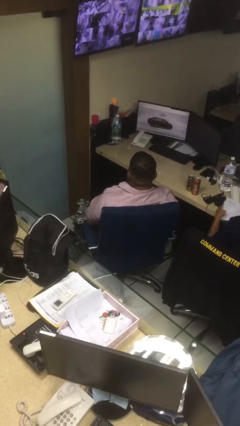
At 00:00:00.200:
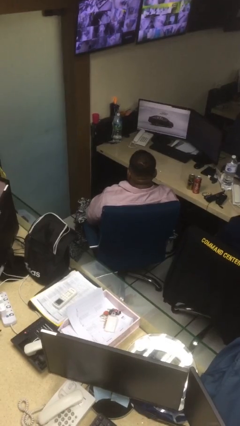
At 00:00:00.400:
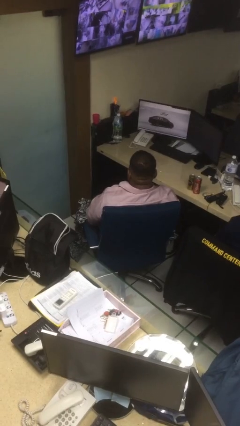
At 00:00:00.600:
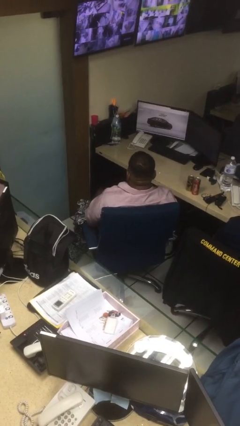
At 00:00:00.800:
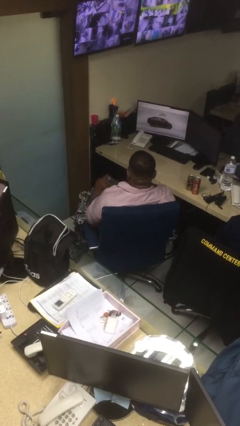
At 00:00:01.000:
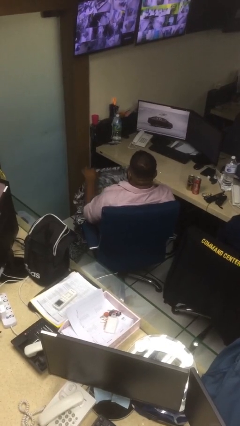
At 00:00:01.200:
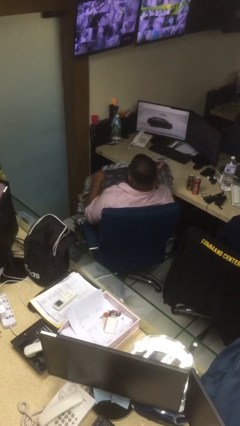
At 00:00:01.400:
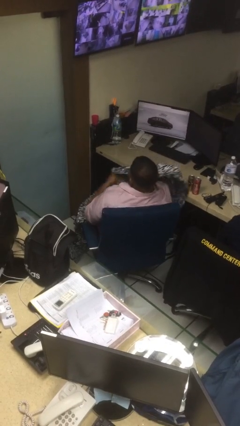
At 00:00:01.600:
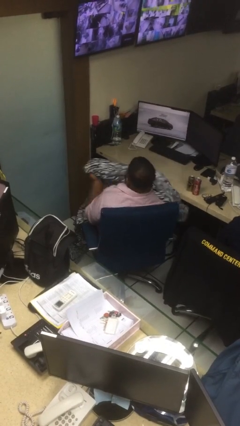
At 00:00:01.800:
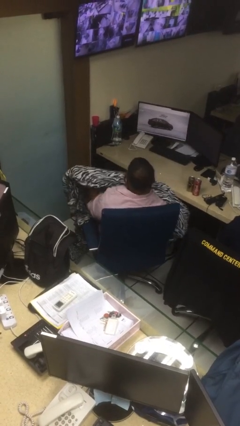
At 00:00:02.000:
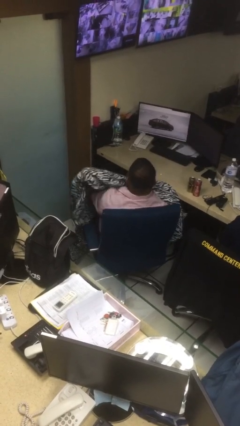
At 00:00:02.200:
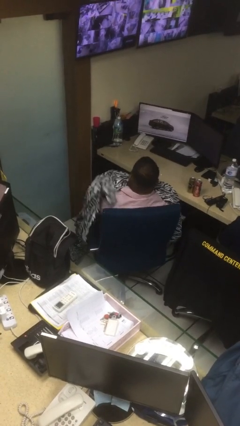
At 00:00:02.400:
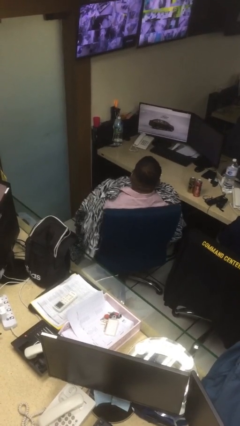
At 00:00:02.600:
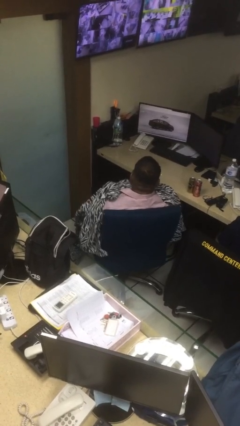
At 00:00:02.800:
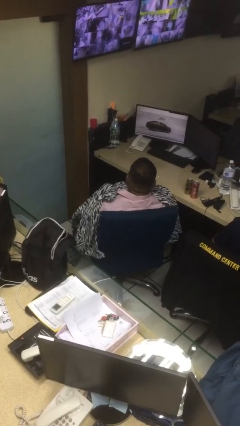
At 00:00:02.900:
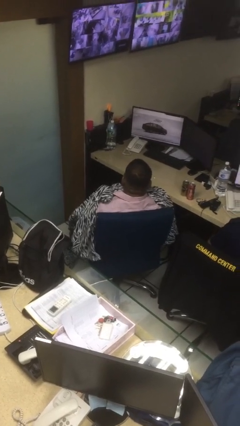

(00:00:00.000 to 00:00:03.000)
person covers with blanket

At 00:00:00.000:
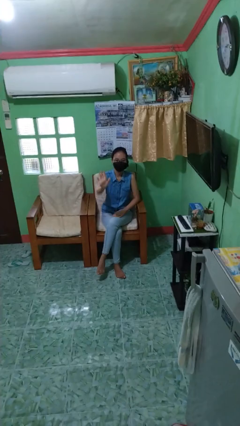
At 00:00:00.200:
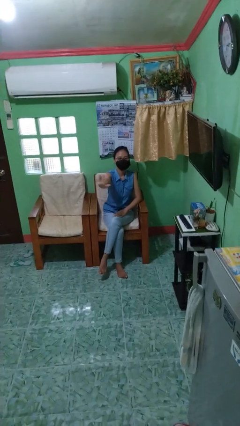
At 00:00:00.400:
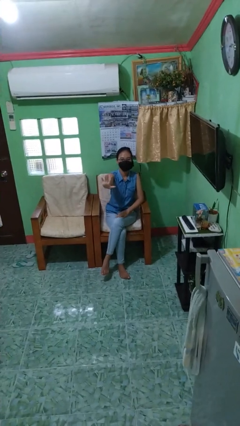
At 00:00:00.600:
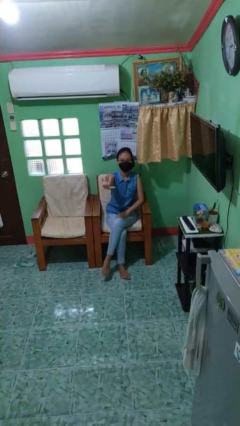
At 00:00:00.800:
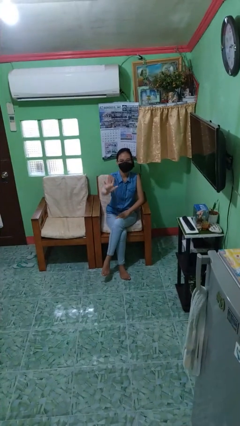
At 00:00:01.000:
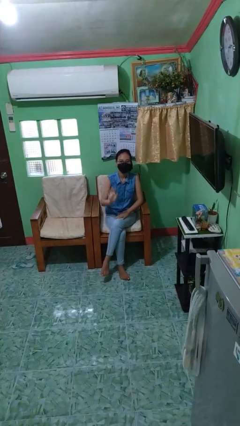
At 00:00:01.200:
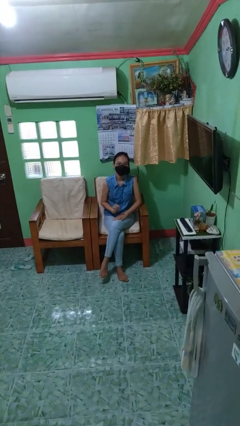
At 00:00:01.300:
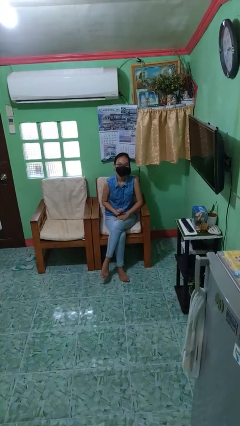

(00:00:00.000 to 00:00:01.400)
person gestures stop

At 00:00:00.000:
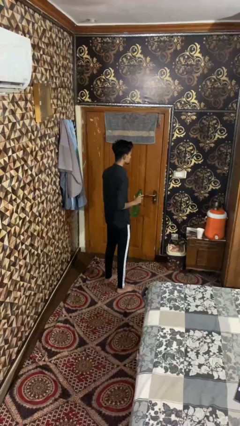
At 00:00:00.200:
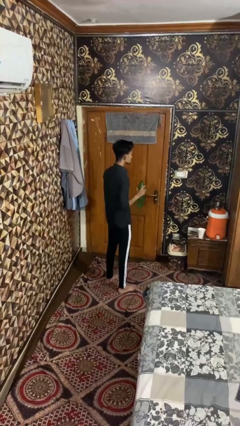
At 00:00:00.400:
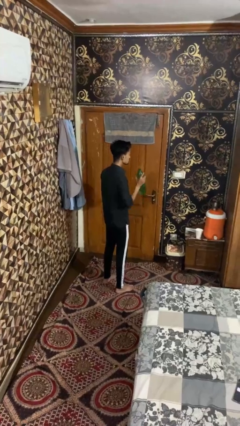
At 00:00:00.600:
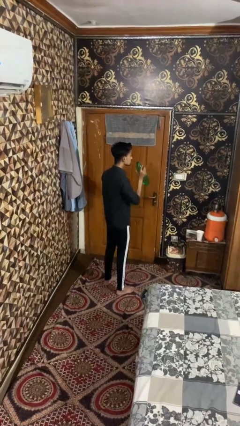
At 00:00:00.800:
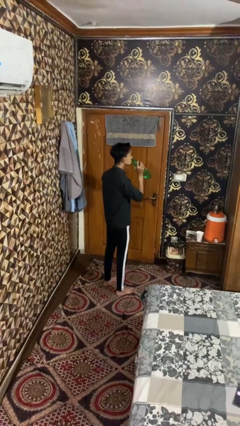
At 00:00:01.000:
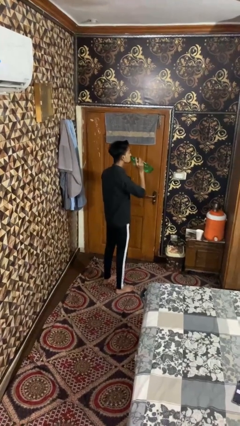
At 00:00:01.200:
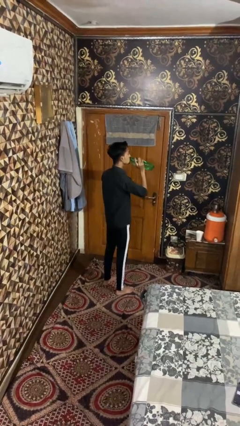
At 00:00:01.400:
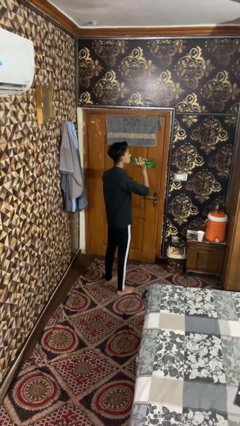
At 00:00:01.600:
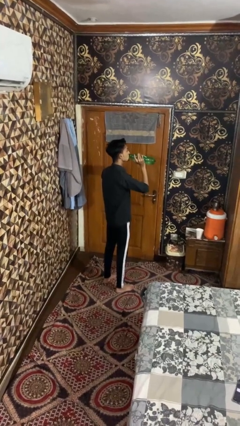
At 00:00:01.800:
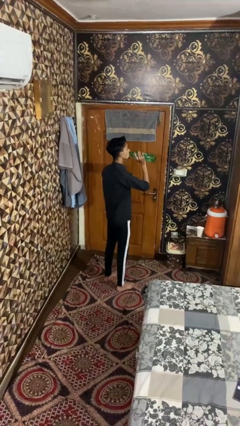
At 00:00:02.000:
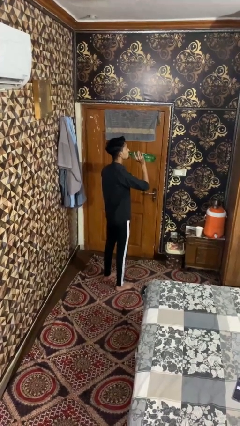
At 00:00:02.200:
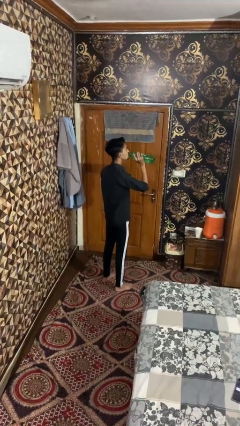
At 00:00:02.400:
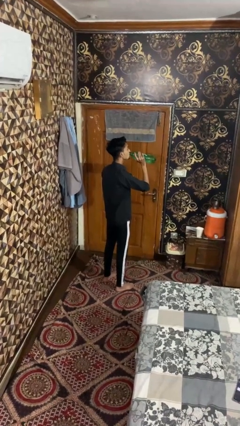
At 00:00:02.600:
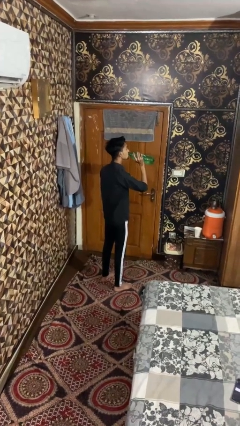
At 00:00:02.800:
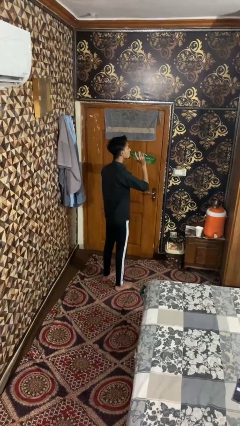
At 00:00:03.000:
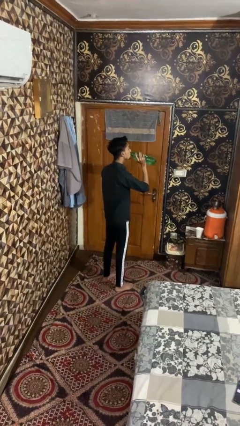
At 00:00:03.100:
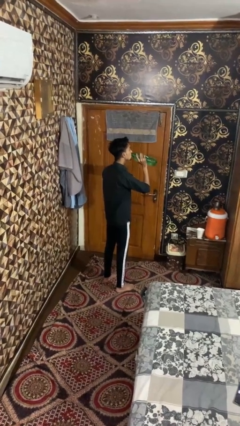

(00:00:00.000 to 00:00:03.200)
person drinks from bottle

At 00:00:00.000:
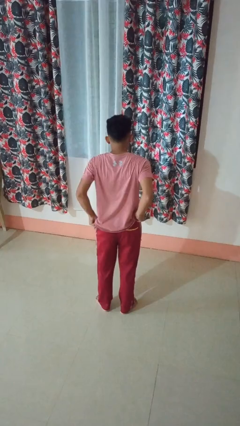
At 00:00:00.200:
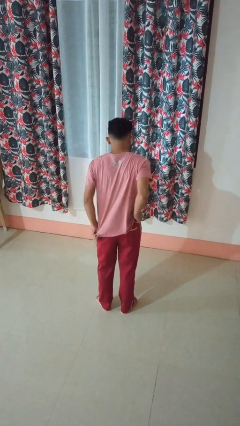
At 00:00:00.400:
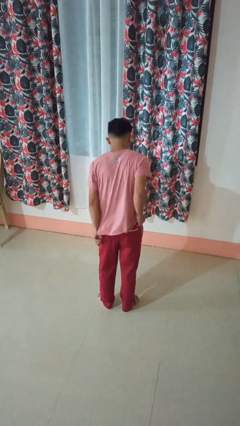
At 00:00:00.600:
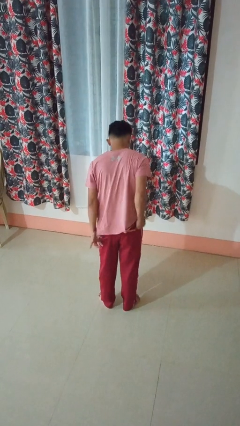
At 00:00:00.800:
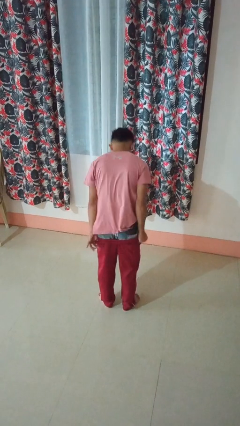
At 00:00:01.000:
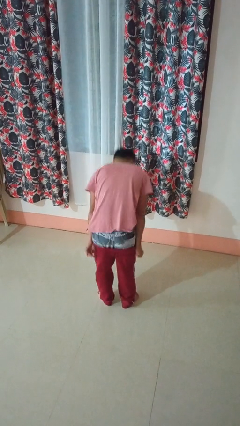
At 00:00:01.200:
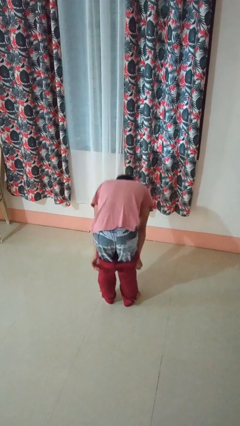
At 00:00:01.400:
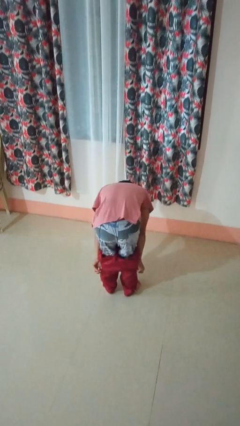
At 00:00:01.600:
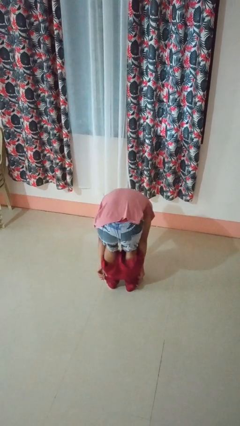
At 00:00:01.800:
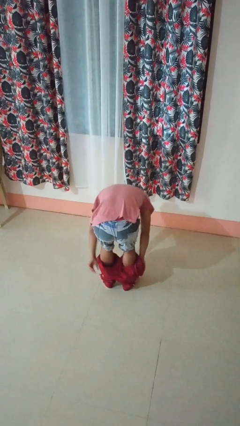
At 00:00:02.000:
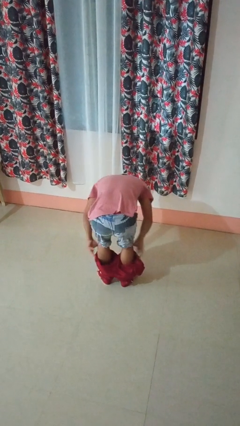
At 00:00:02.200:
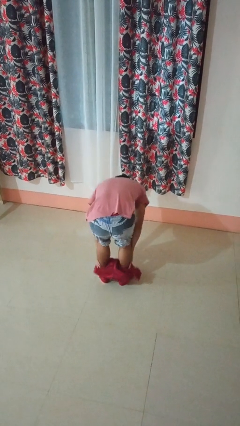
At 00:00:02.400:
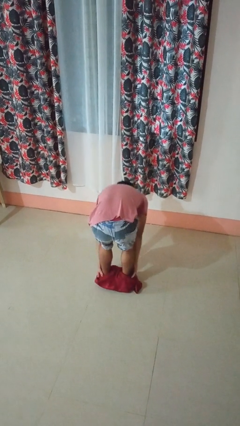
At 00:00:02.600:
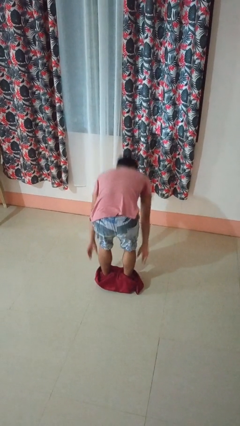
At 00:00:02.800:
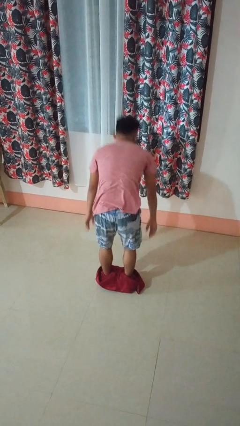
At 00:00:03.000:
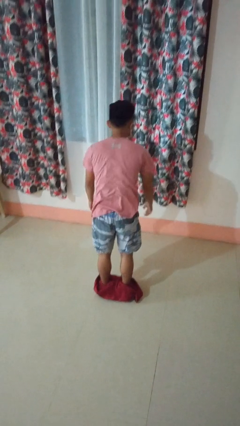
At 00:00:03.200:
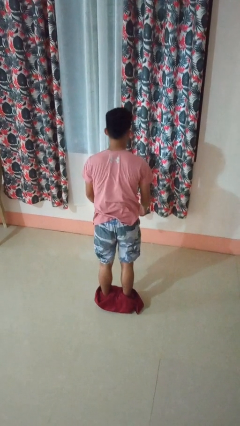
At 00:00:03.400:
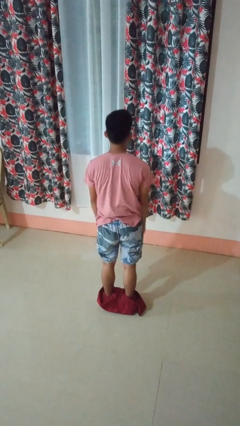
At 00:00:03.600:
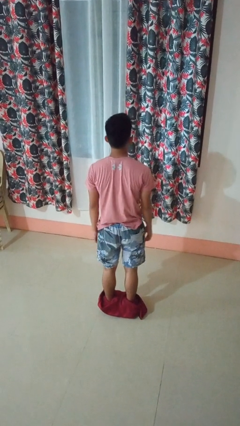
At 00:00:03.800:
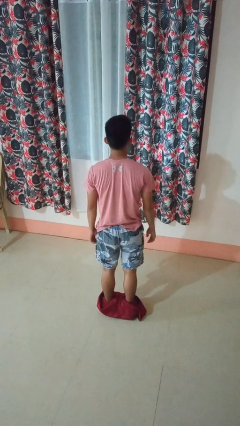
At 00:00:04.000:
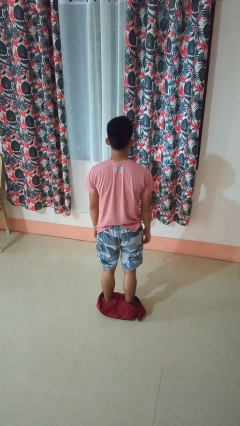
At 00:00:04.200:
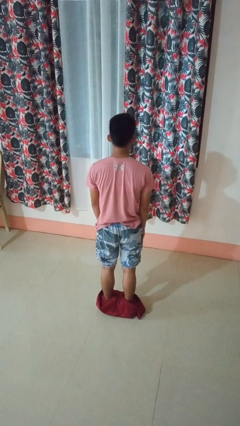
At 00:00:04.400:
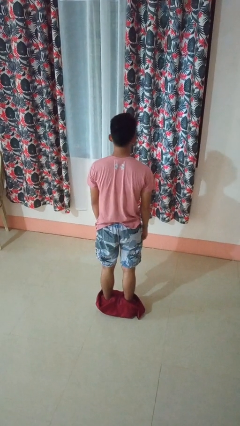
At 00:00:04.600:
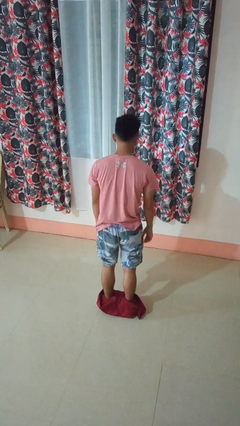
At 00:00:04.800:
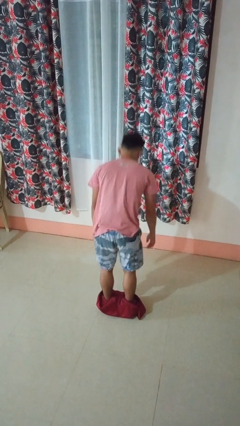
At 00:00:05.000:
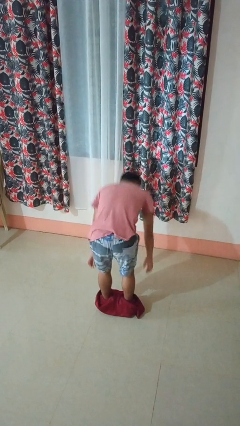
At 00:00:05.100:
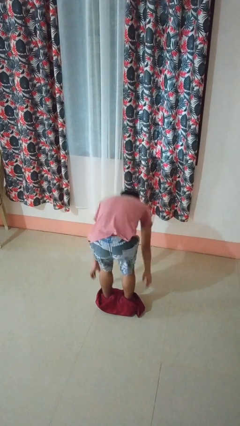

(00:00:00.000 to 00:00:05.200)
person takes off pants

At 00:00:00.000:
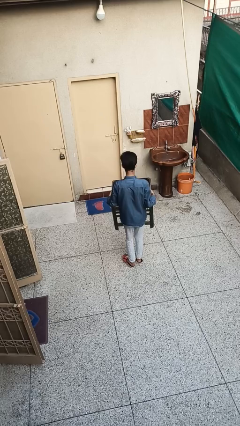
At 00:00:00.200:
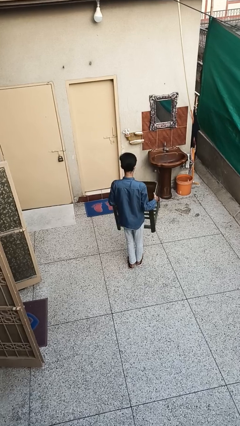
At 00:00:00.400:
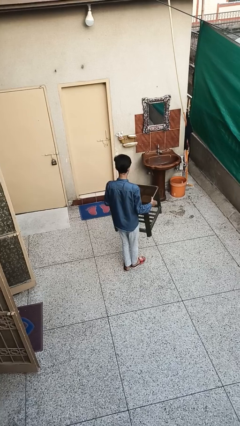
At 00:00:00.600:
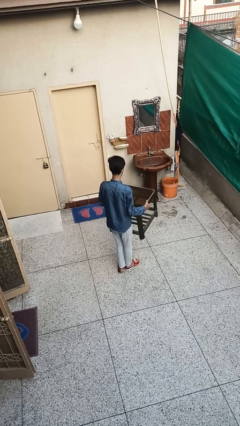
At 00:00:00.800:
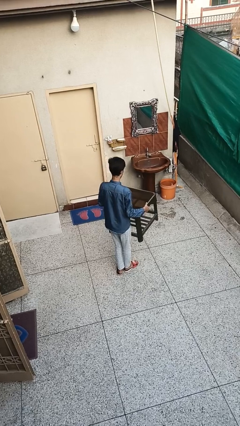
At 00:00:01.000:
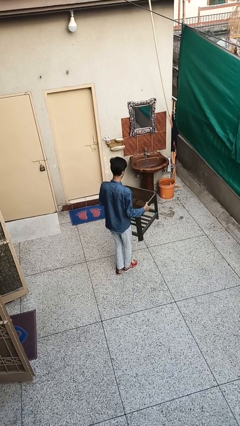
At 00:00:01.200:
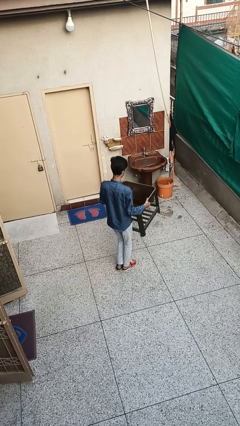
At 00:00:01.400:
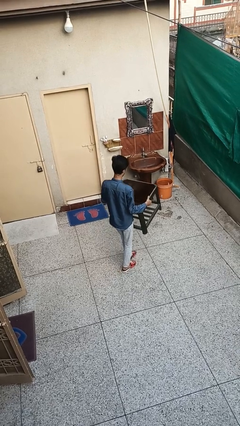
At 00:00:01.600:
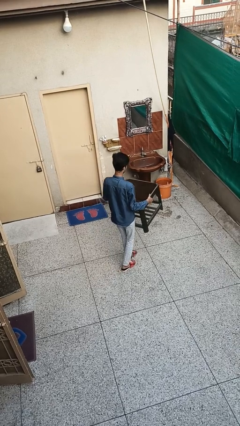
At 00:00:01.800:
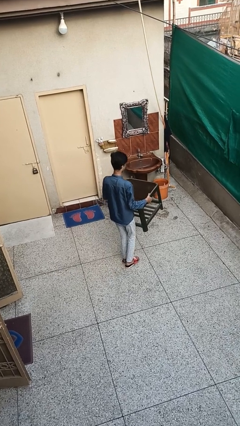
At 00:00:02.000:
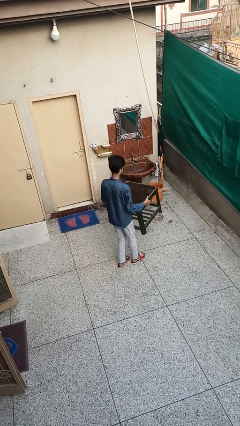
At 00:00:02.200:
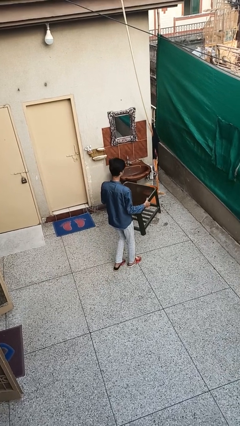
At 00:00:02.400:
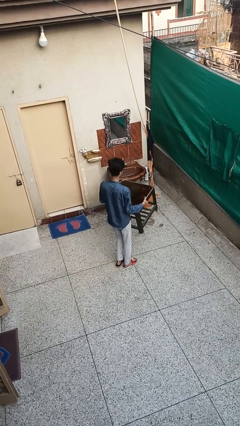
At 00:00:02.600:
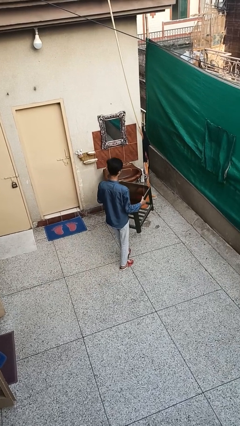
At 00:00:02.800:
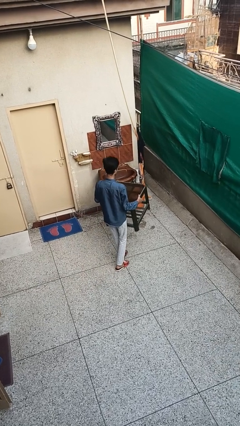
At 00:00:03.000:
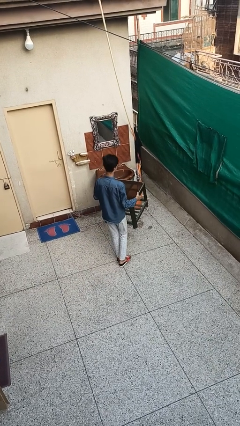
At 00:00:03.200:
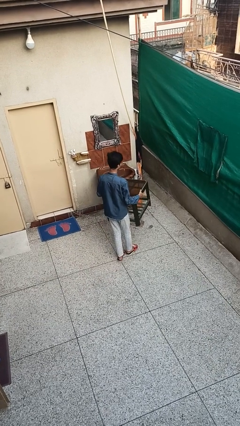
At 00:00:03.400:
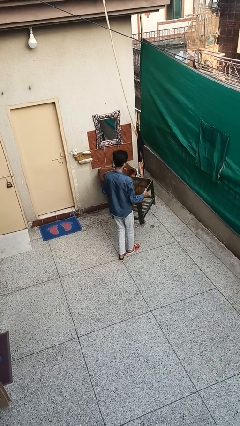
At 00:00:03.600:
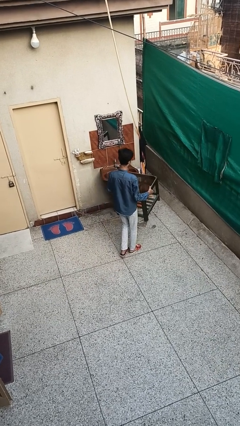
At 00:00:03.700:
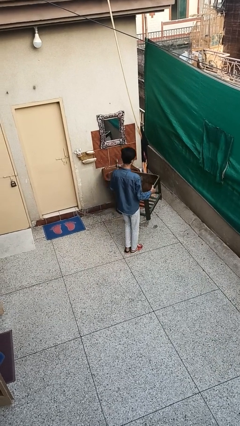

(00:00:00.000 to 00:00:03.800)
person carries furniture

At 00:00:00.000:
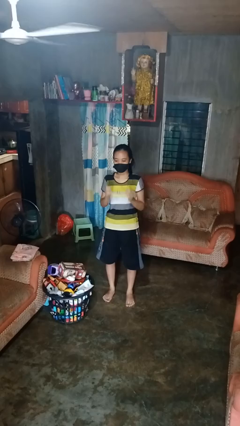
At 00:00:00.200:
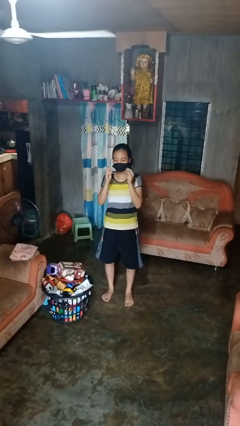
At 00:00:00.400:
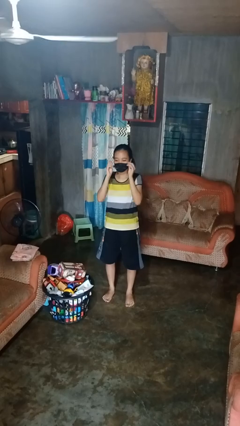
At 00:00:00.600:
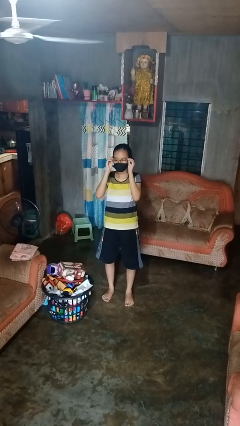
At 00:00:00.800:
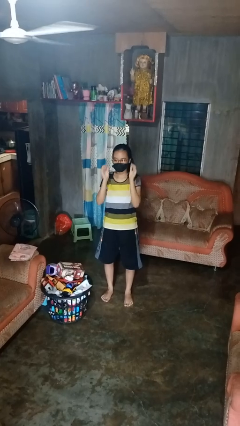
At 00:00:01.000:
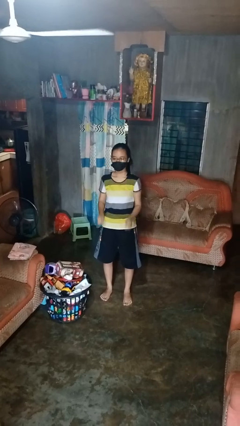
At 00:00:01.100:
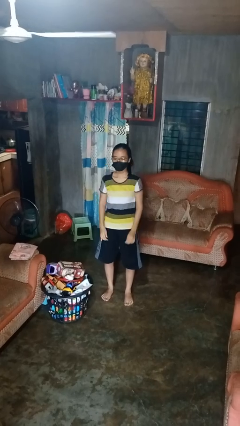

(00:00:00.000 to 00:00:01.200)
person puts on glasses
